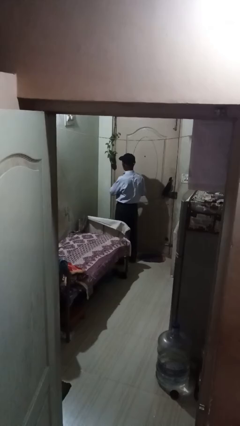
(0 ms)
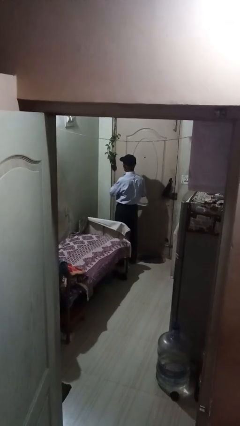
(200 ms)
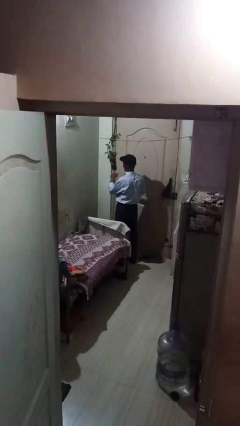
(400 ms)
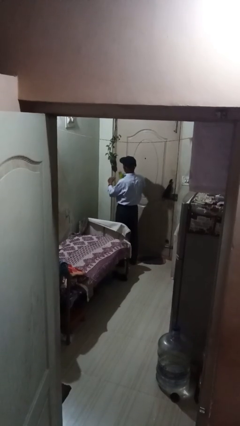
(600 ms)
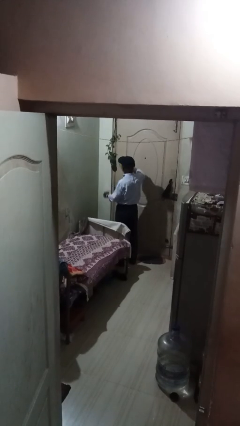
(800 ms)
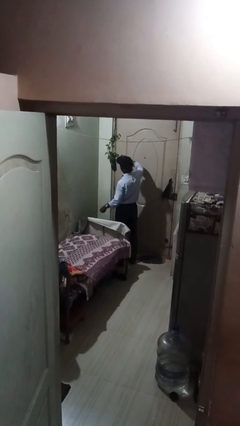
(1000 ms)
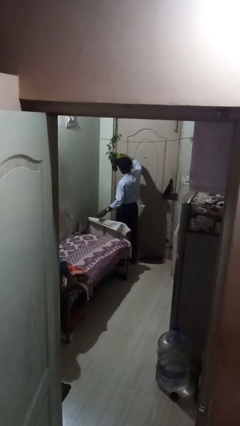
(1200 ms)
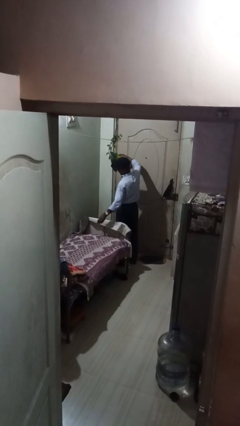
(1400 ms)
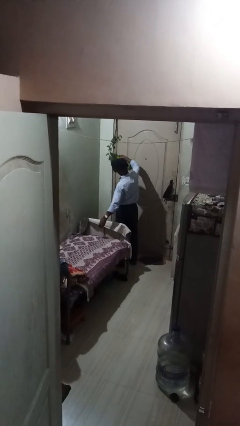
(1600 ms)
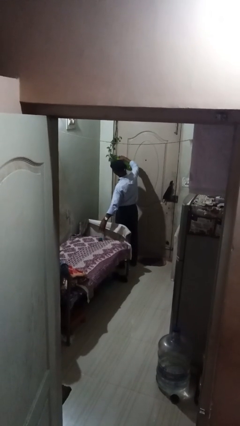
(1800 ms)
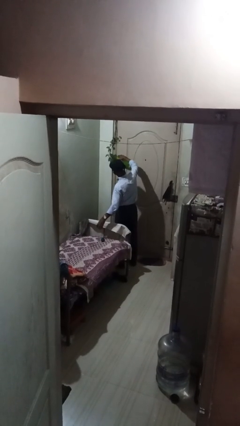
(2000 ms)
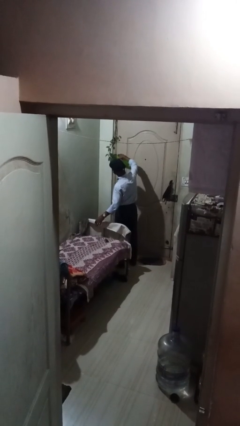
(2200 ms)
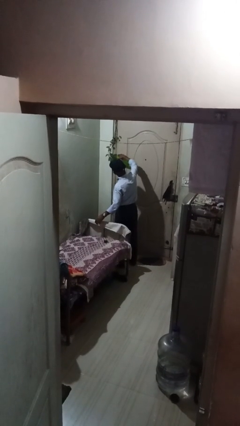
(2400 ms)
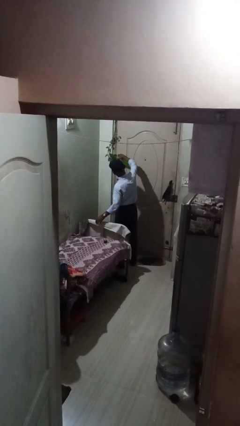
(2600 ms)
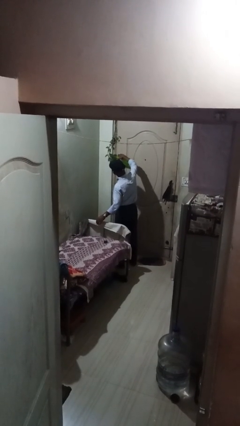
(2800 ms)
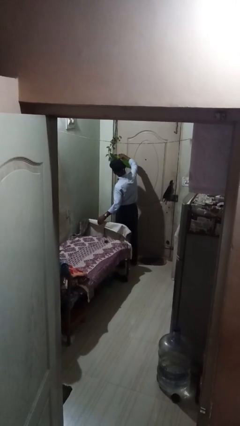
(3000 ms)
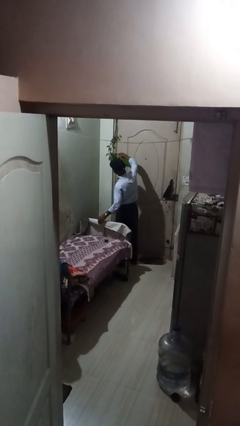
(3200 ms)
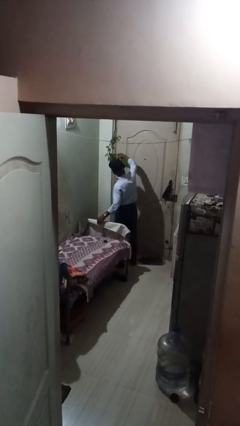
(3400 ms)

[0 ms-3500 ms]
person waters houseplant

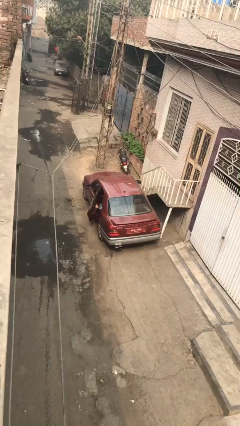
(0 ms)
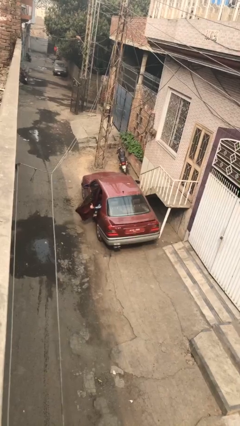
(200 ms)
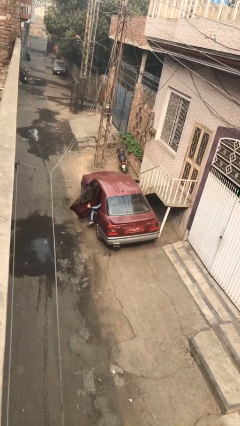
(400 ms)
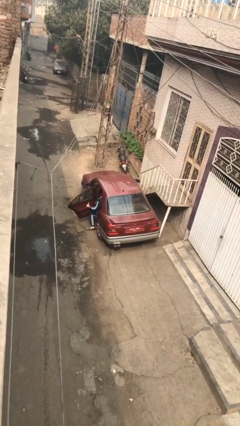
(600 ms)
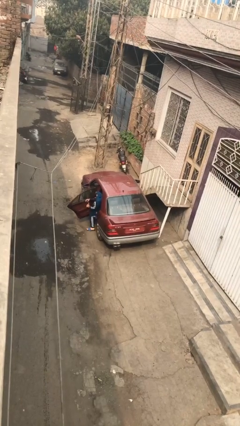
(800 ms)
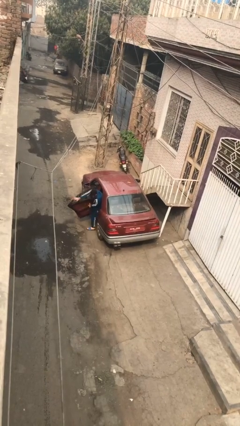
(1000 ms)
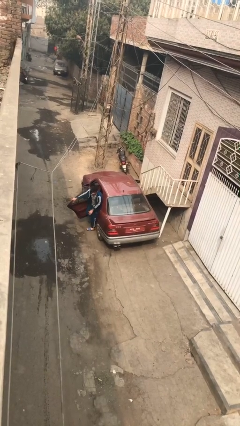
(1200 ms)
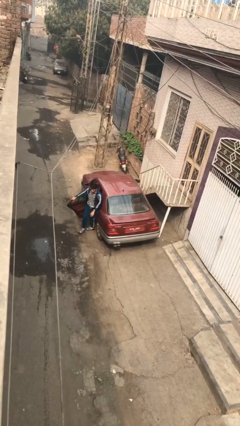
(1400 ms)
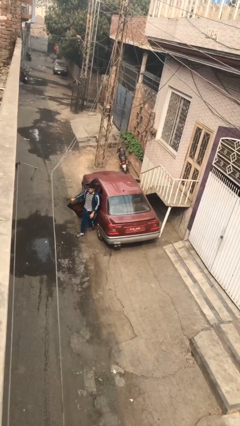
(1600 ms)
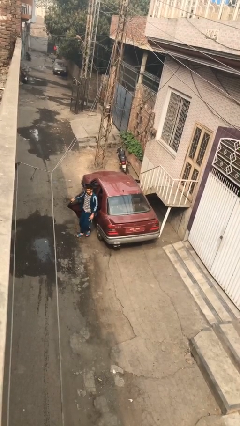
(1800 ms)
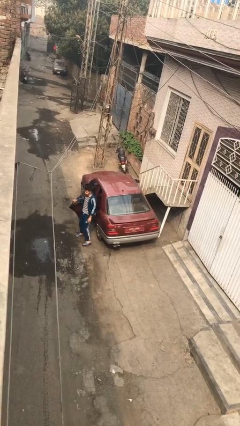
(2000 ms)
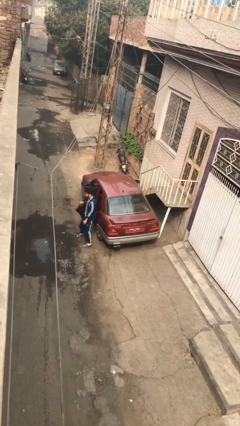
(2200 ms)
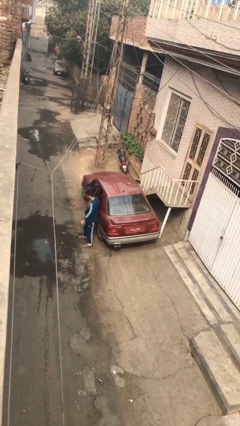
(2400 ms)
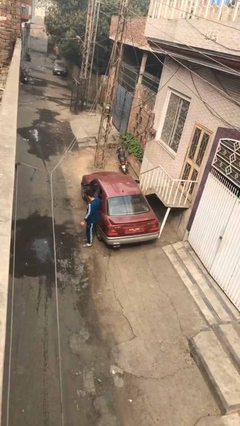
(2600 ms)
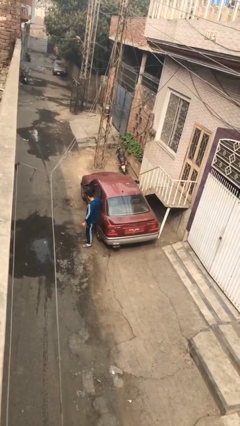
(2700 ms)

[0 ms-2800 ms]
car drops off person

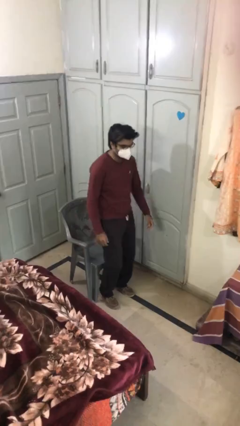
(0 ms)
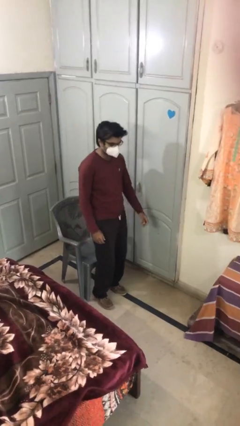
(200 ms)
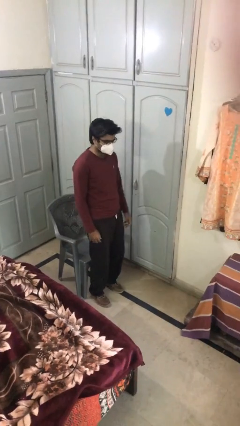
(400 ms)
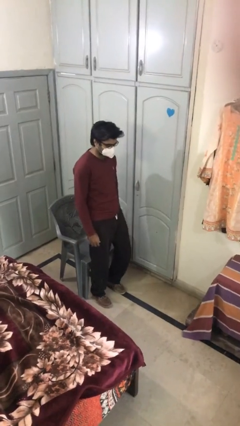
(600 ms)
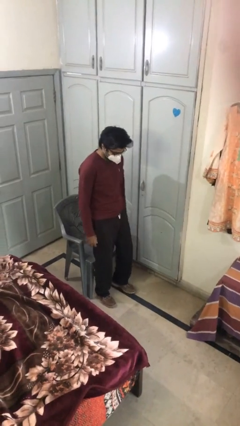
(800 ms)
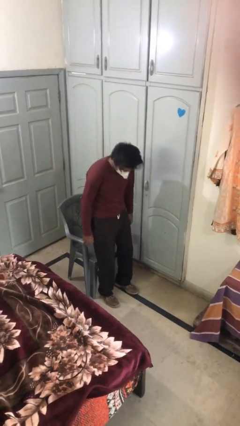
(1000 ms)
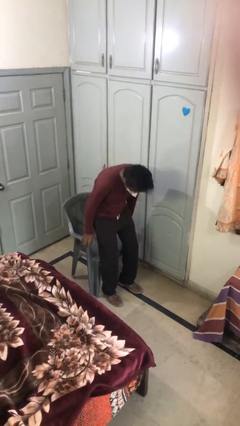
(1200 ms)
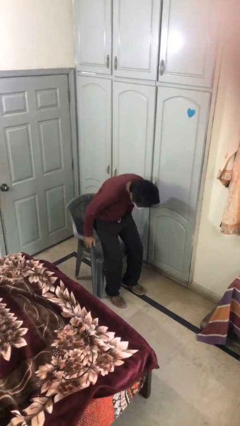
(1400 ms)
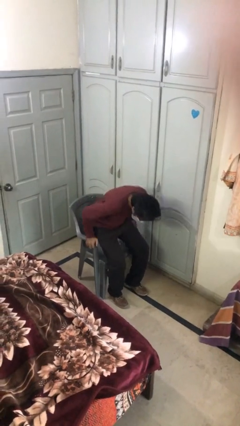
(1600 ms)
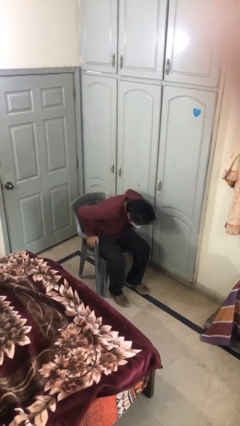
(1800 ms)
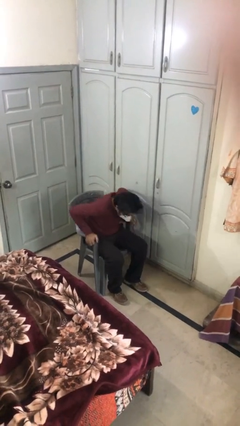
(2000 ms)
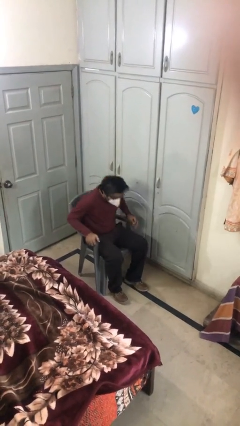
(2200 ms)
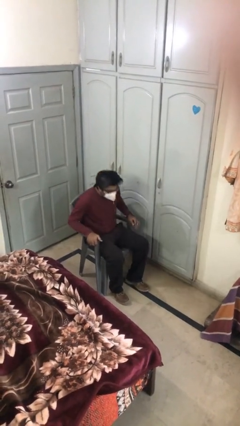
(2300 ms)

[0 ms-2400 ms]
person sits down

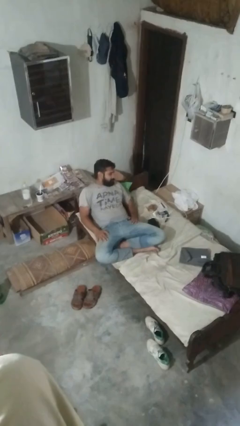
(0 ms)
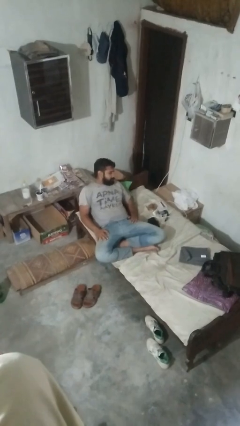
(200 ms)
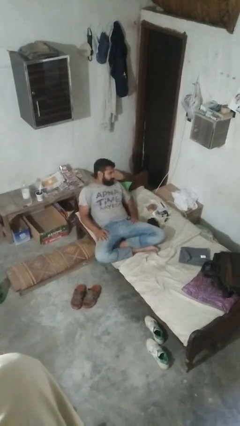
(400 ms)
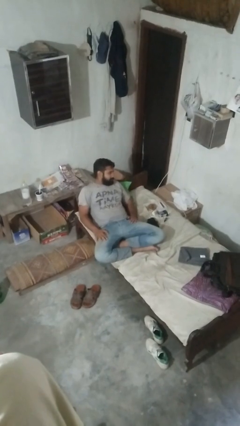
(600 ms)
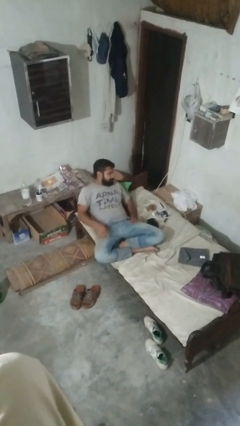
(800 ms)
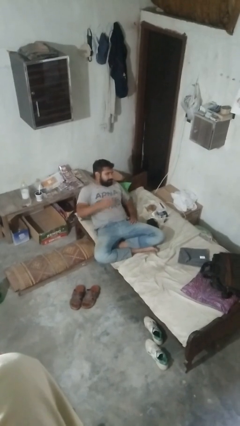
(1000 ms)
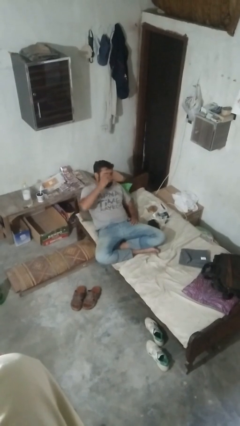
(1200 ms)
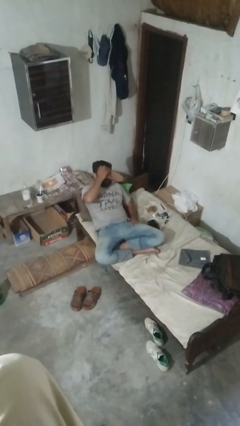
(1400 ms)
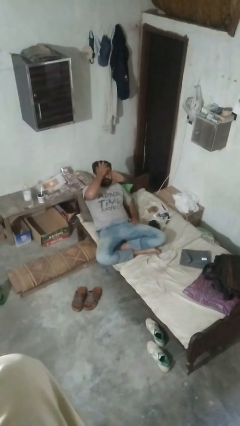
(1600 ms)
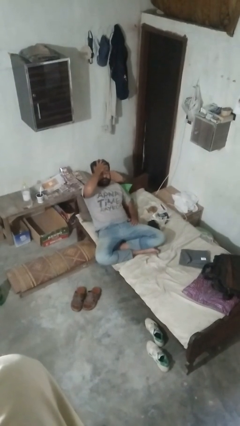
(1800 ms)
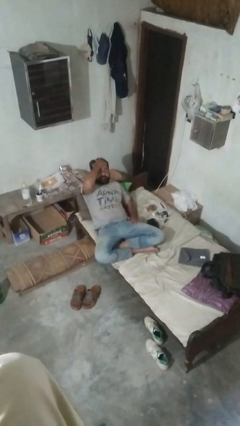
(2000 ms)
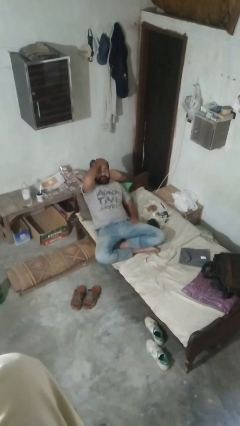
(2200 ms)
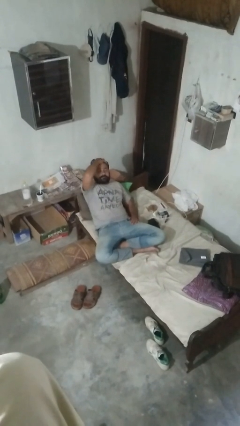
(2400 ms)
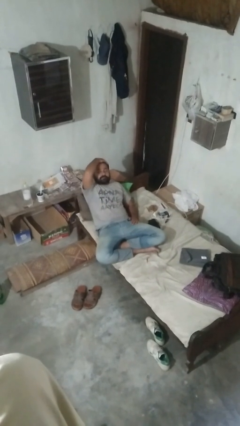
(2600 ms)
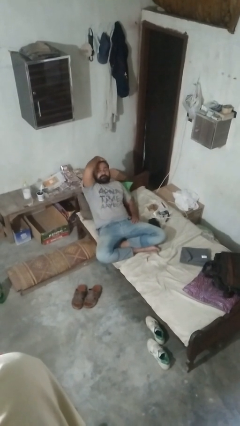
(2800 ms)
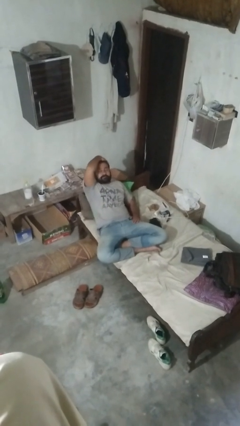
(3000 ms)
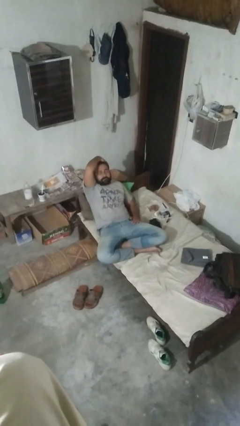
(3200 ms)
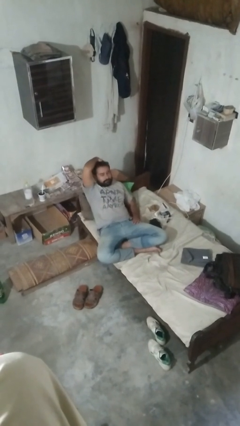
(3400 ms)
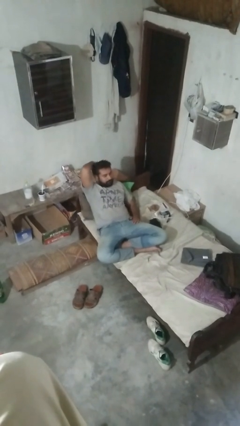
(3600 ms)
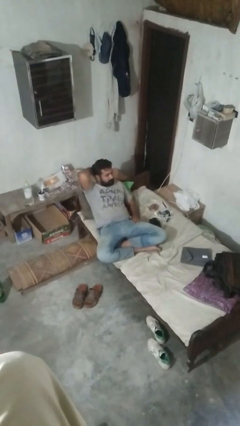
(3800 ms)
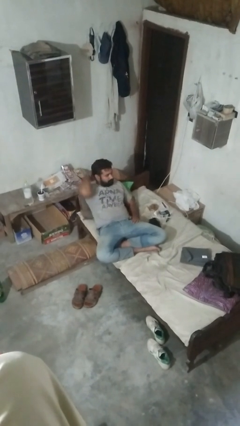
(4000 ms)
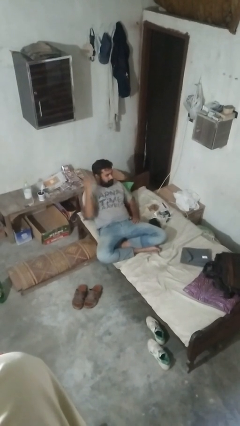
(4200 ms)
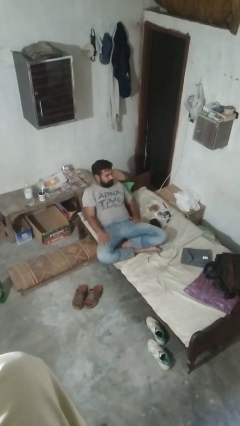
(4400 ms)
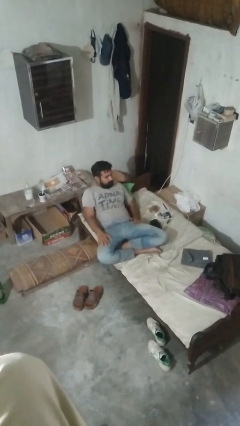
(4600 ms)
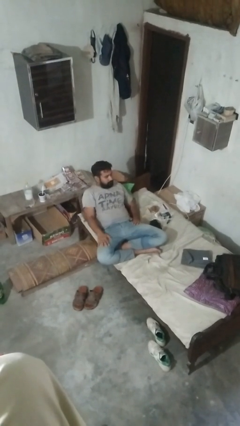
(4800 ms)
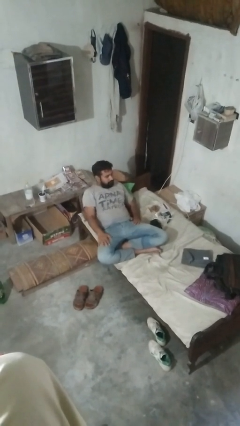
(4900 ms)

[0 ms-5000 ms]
person strokes hair

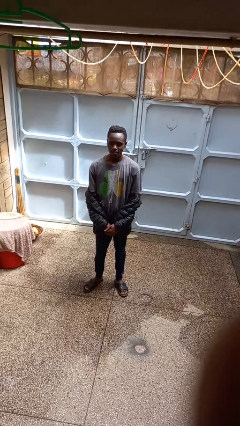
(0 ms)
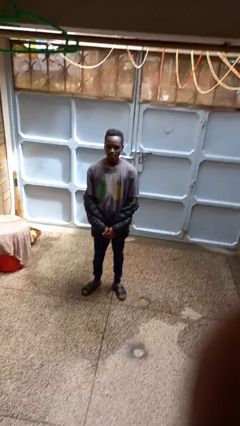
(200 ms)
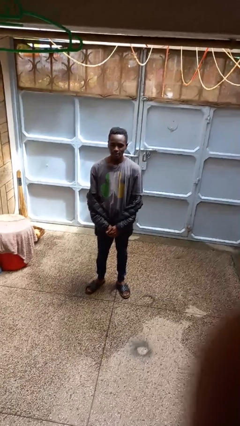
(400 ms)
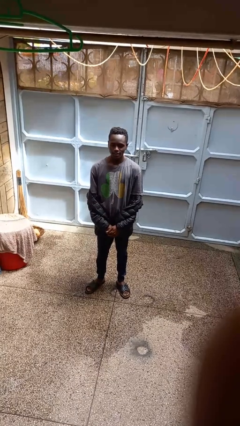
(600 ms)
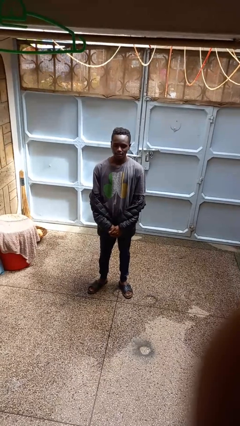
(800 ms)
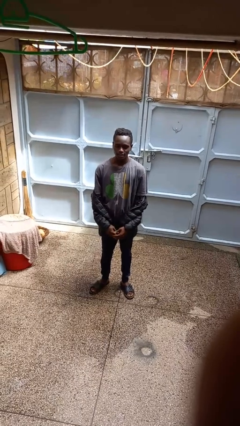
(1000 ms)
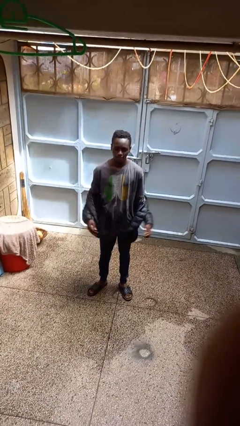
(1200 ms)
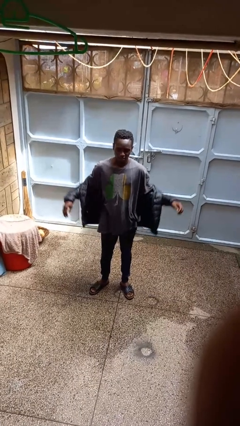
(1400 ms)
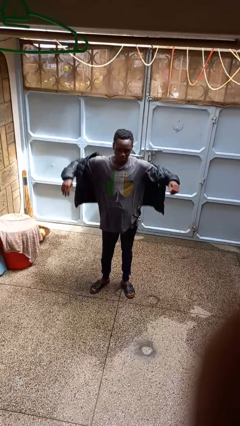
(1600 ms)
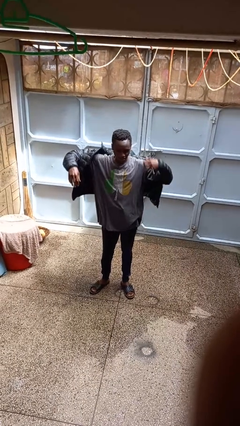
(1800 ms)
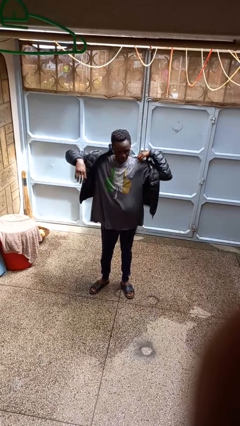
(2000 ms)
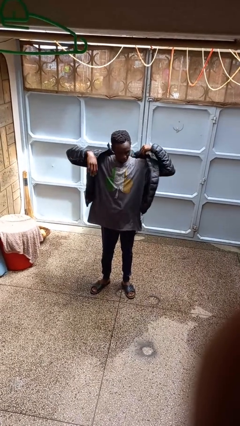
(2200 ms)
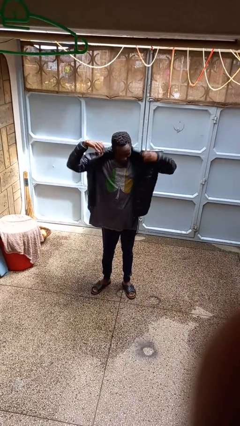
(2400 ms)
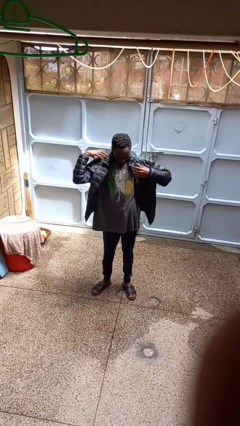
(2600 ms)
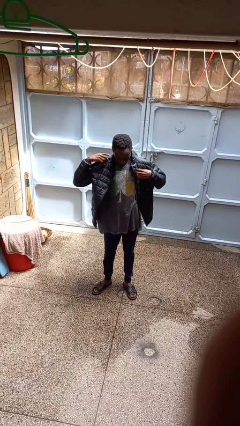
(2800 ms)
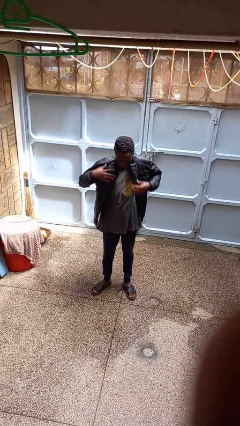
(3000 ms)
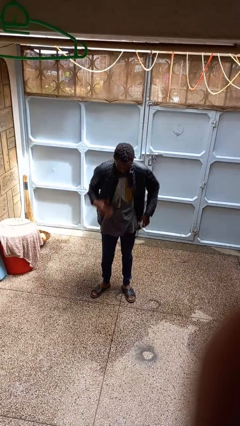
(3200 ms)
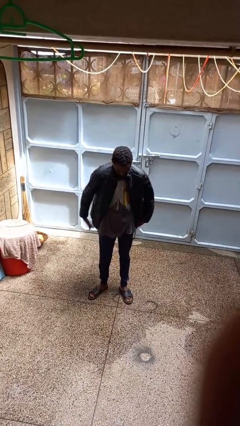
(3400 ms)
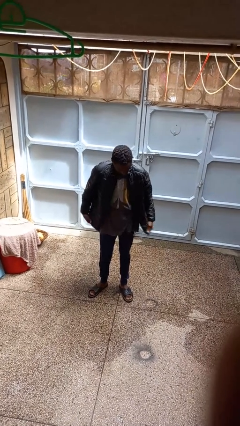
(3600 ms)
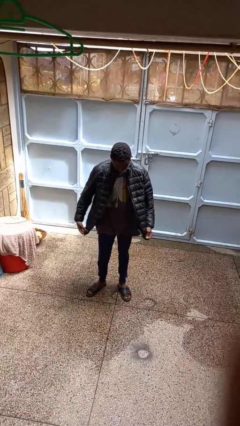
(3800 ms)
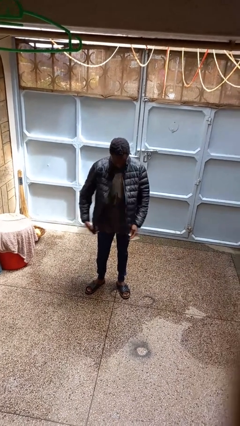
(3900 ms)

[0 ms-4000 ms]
person puts on jacket
